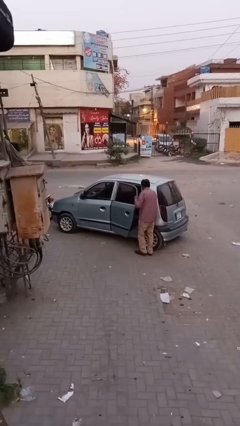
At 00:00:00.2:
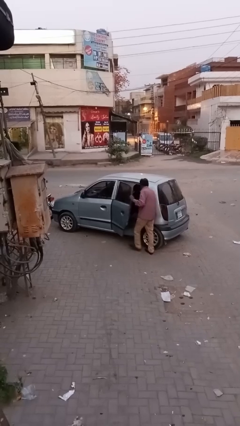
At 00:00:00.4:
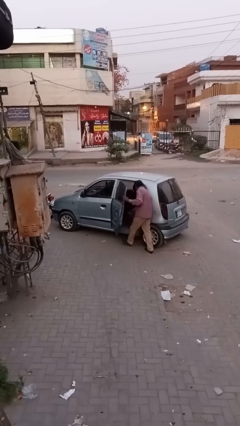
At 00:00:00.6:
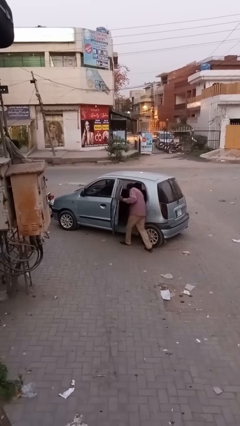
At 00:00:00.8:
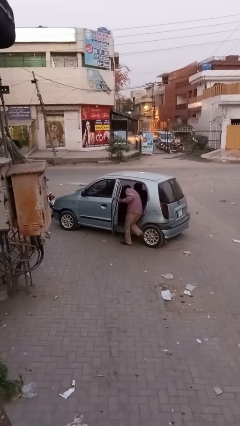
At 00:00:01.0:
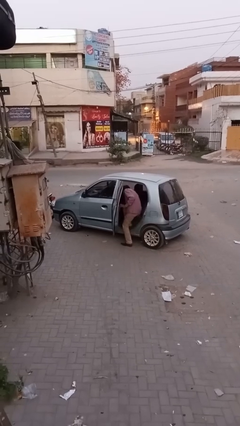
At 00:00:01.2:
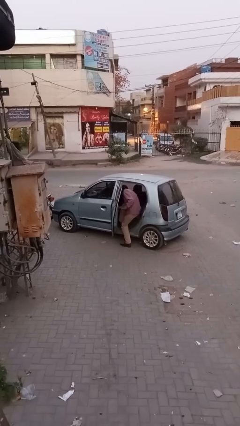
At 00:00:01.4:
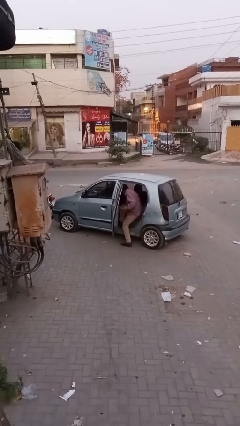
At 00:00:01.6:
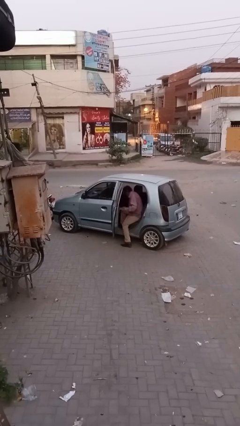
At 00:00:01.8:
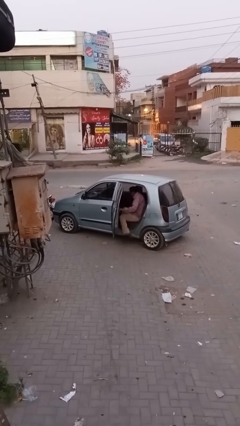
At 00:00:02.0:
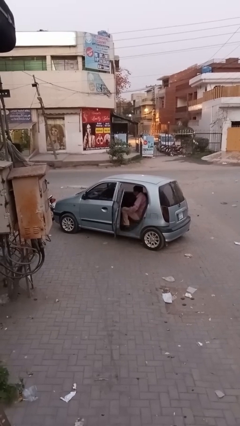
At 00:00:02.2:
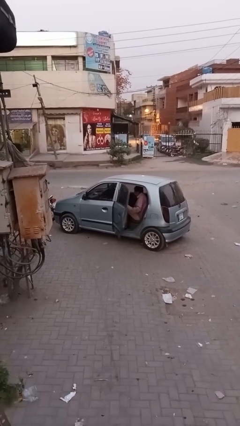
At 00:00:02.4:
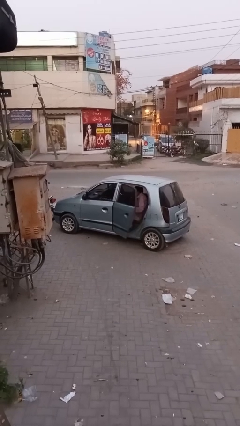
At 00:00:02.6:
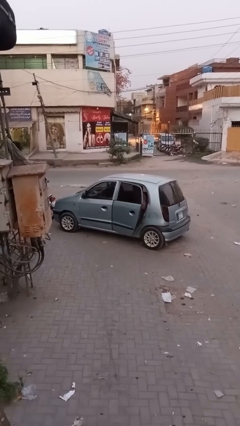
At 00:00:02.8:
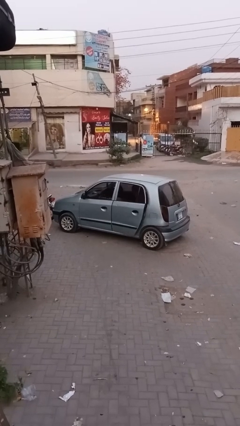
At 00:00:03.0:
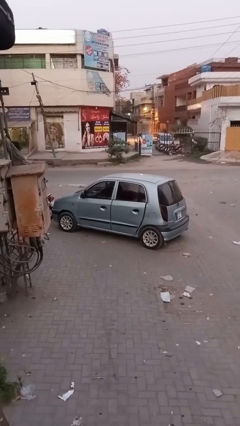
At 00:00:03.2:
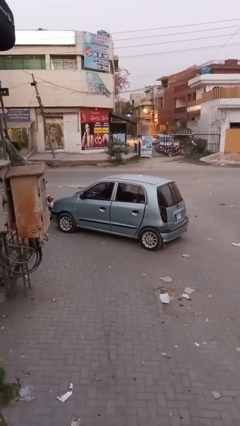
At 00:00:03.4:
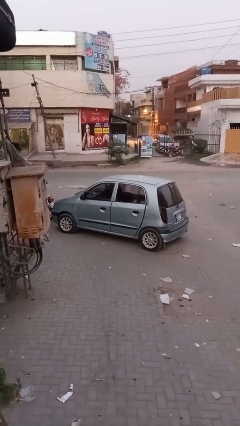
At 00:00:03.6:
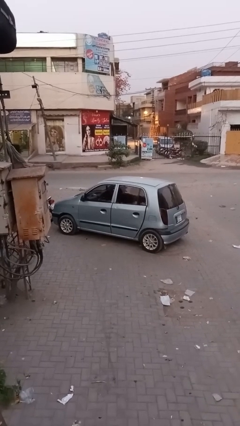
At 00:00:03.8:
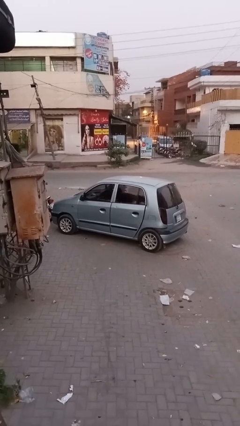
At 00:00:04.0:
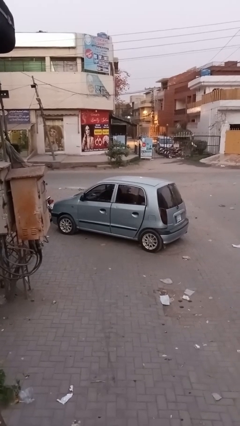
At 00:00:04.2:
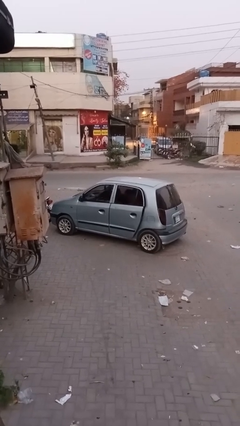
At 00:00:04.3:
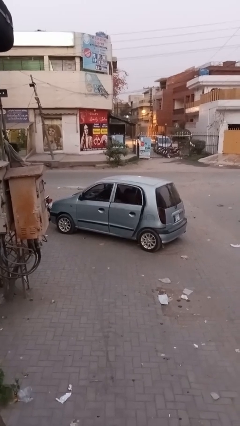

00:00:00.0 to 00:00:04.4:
car picks up person

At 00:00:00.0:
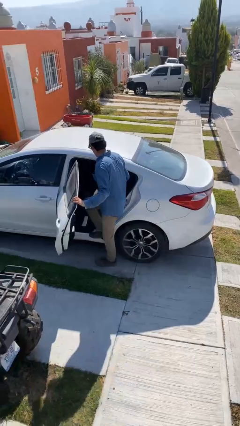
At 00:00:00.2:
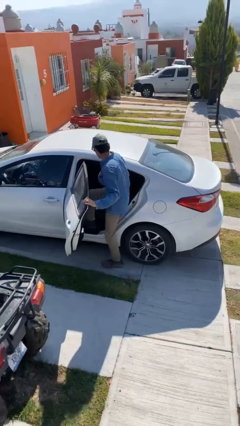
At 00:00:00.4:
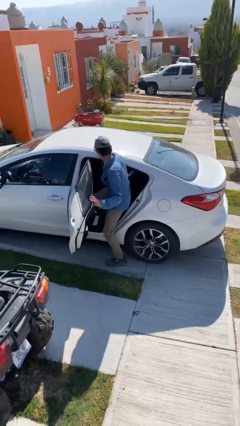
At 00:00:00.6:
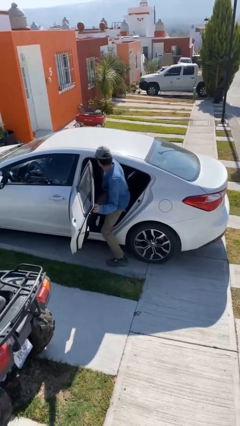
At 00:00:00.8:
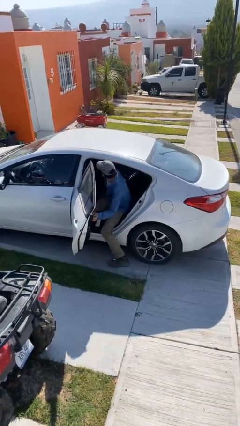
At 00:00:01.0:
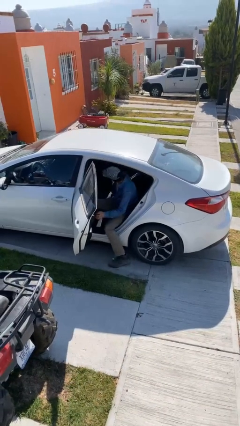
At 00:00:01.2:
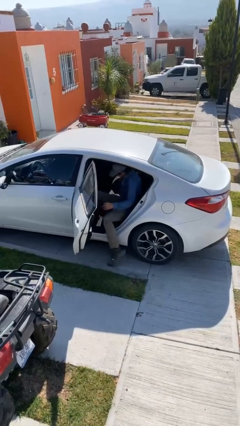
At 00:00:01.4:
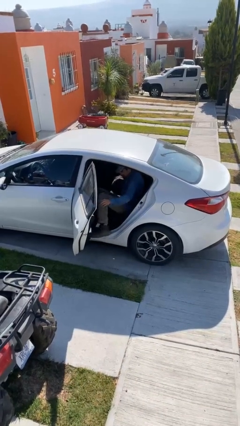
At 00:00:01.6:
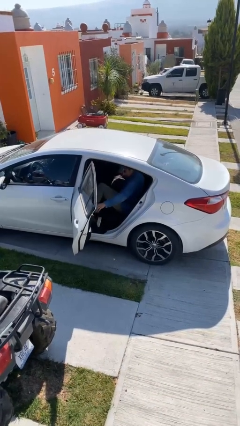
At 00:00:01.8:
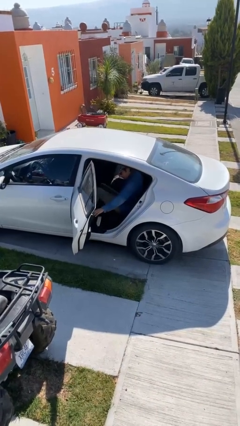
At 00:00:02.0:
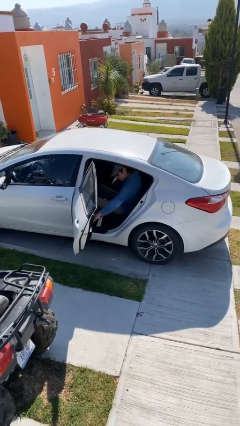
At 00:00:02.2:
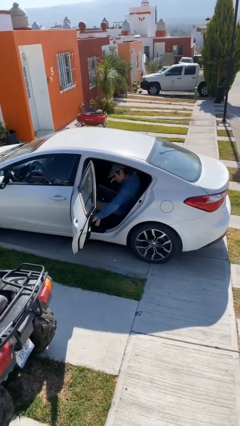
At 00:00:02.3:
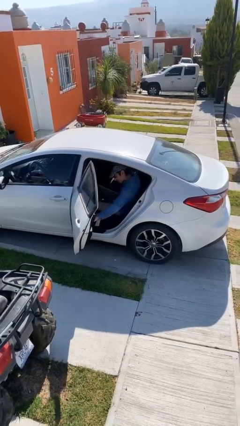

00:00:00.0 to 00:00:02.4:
person enters car

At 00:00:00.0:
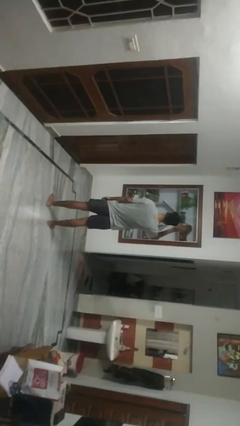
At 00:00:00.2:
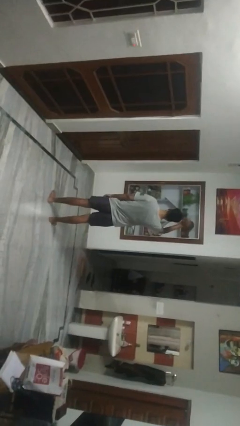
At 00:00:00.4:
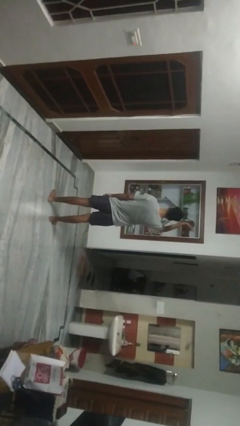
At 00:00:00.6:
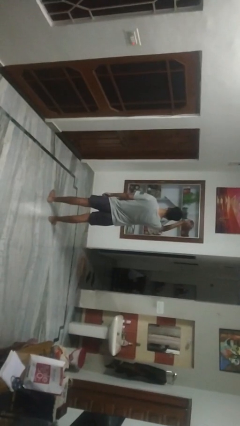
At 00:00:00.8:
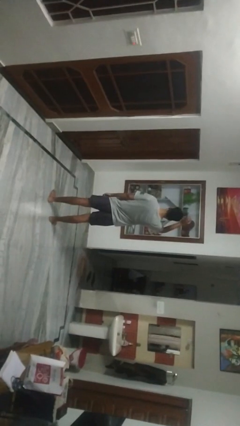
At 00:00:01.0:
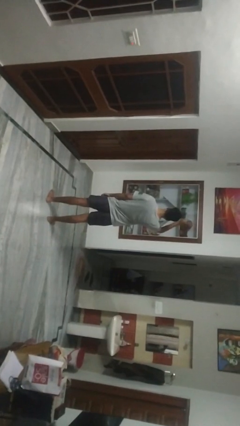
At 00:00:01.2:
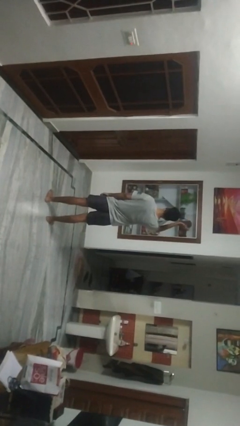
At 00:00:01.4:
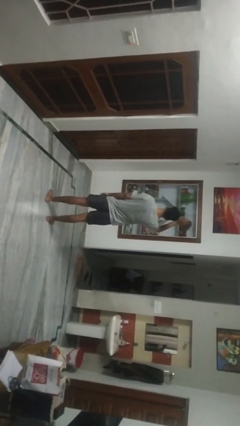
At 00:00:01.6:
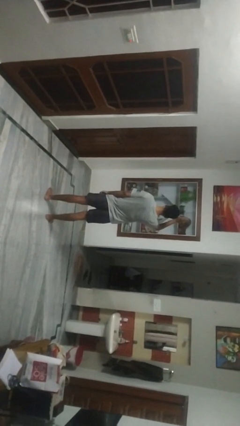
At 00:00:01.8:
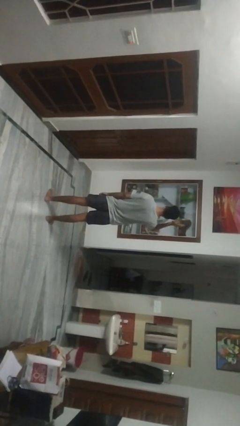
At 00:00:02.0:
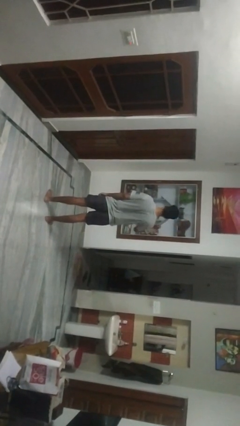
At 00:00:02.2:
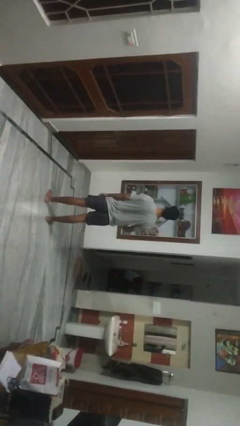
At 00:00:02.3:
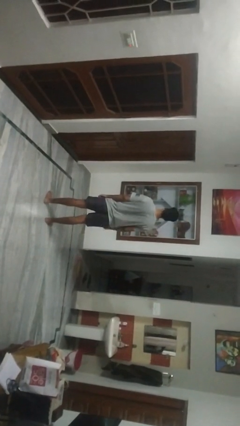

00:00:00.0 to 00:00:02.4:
person waves at person

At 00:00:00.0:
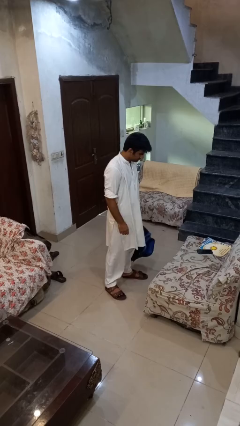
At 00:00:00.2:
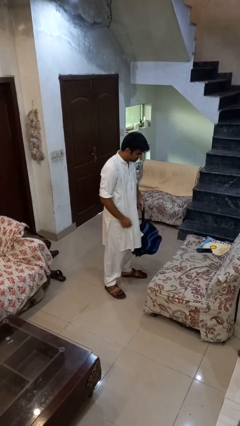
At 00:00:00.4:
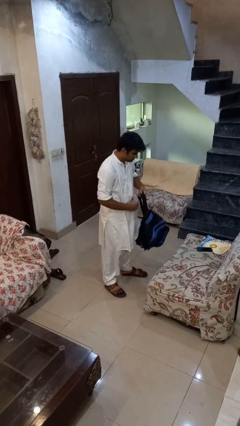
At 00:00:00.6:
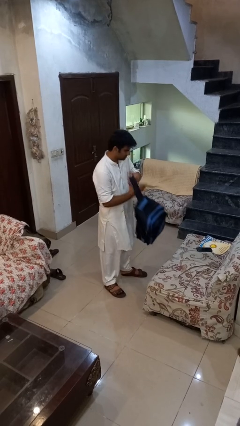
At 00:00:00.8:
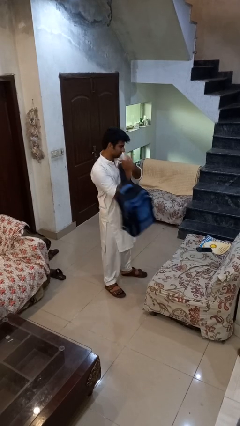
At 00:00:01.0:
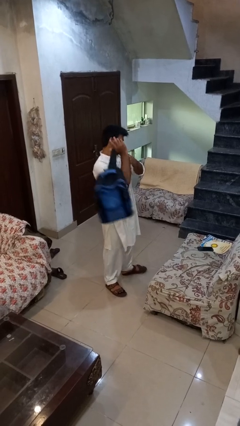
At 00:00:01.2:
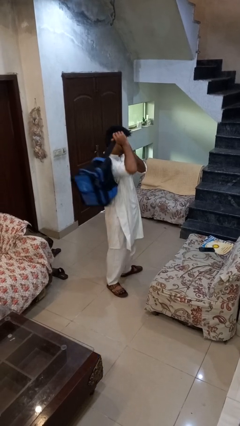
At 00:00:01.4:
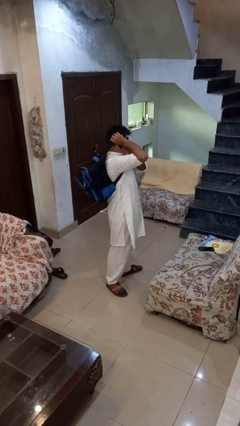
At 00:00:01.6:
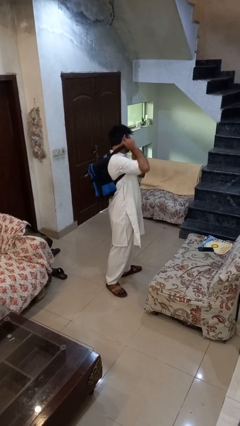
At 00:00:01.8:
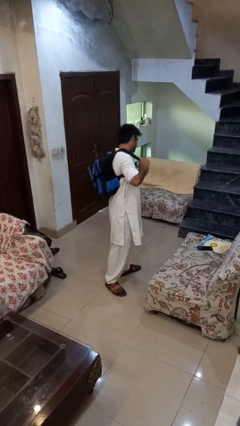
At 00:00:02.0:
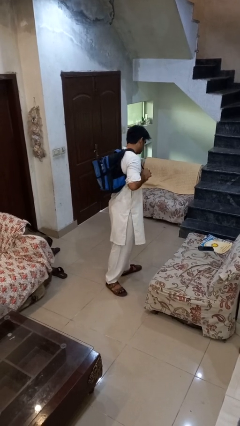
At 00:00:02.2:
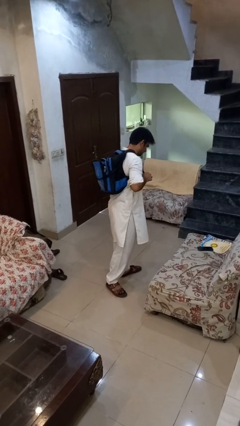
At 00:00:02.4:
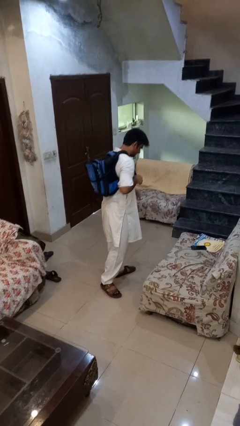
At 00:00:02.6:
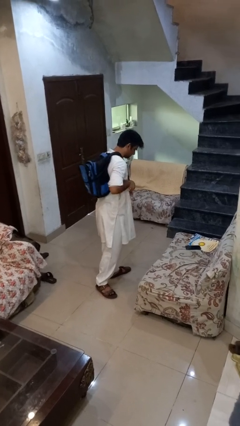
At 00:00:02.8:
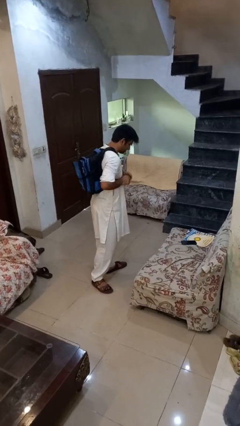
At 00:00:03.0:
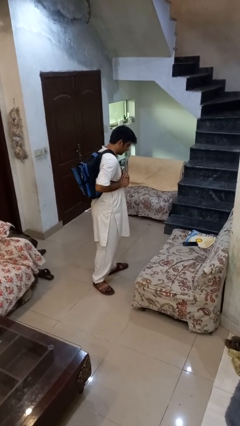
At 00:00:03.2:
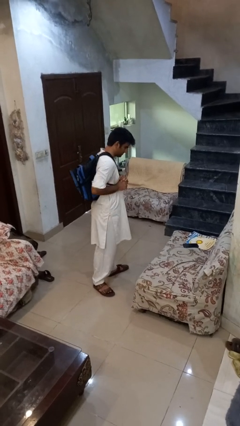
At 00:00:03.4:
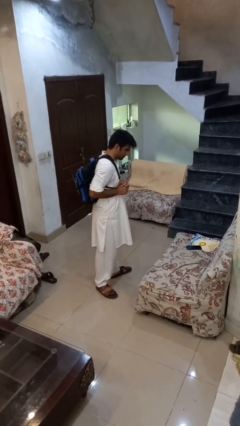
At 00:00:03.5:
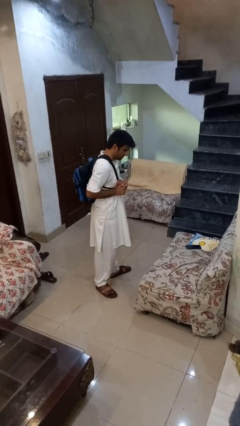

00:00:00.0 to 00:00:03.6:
person puts on backpack

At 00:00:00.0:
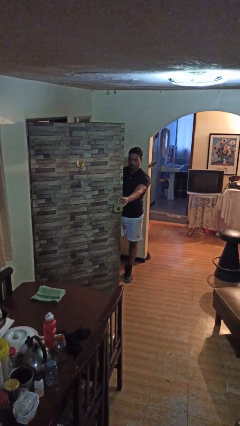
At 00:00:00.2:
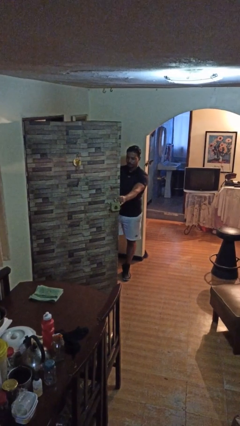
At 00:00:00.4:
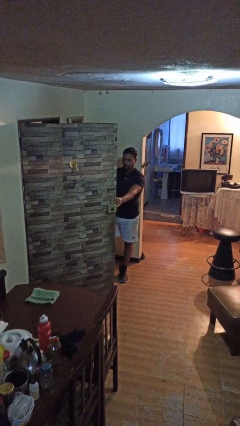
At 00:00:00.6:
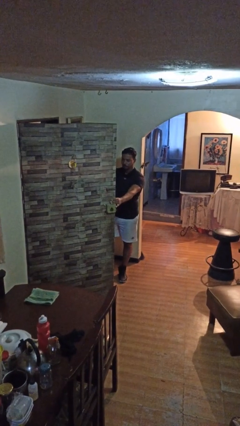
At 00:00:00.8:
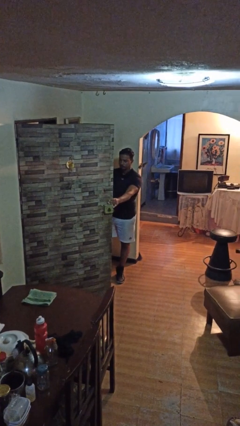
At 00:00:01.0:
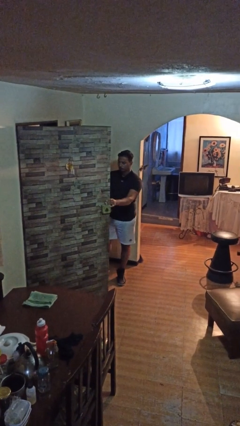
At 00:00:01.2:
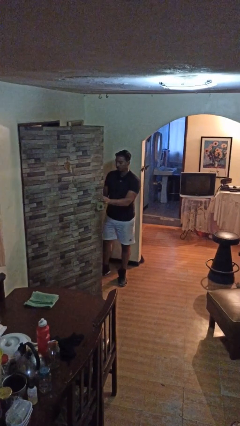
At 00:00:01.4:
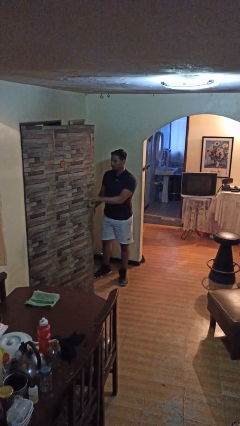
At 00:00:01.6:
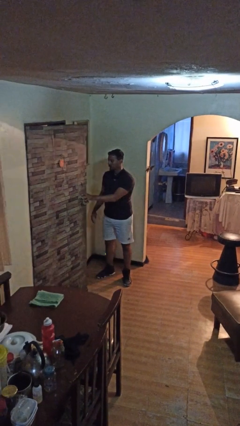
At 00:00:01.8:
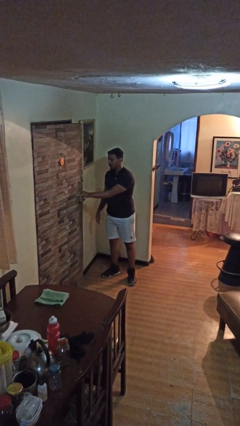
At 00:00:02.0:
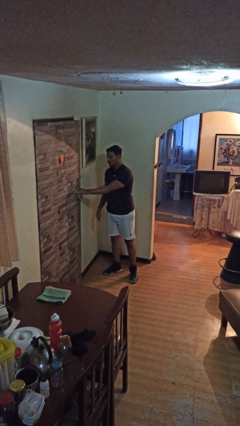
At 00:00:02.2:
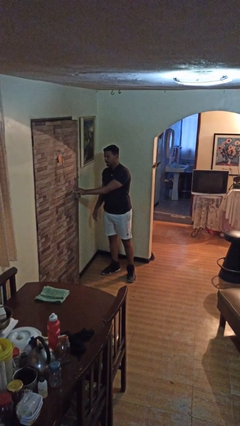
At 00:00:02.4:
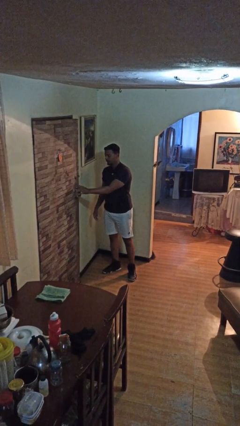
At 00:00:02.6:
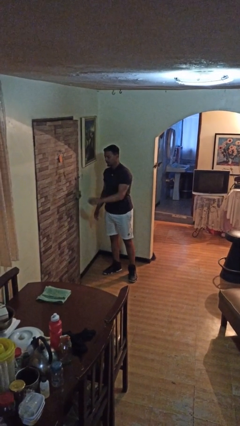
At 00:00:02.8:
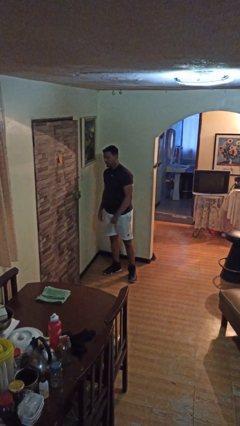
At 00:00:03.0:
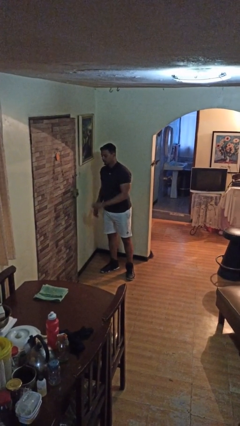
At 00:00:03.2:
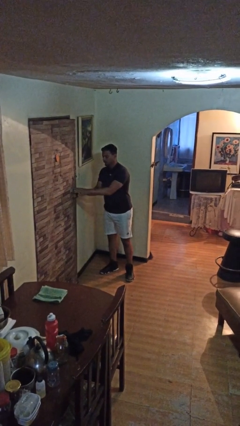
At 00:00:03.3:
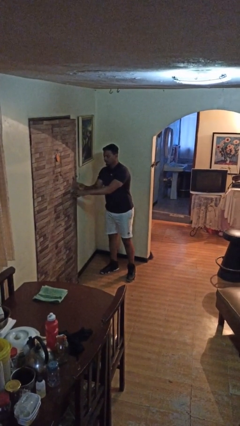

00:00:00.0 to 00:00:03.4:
person closes facility door

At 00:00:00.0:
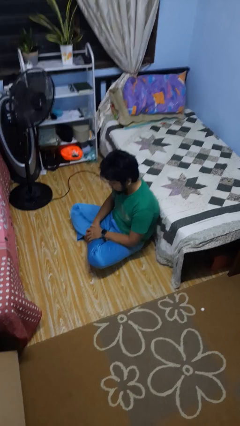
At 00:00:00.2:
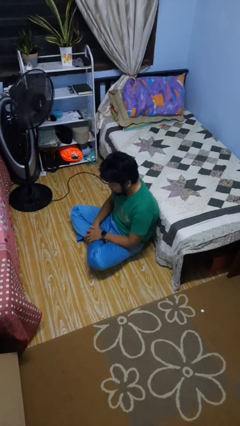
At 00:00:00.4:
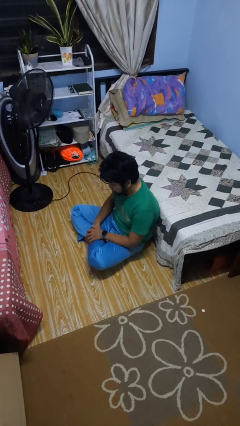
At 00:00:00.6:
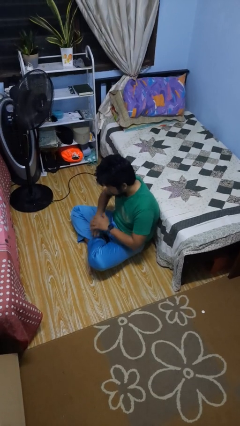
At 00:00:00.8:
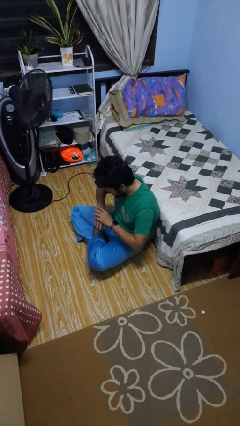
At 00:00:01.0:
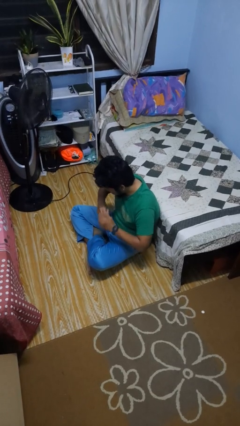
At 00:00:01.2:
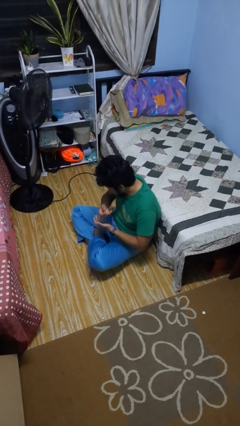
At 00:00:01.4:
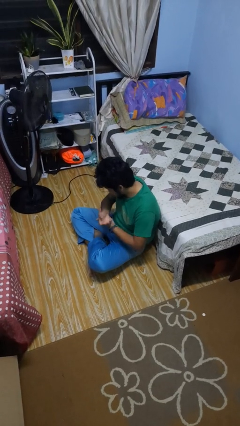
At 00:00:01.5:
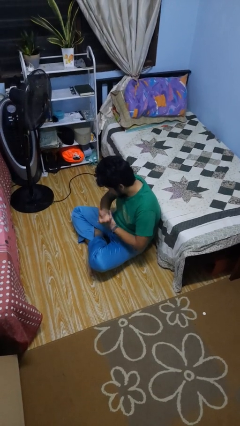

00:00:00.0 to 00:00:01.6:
person looks at hands in lap
